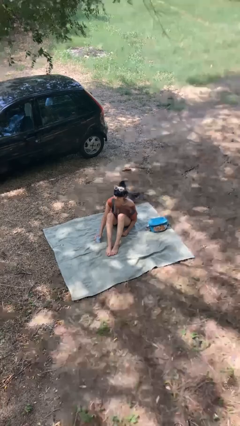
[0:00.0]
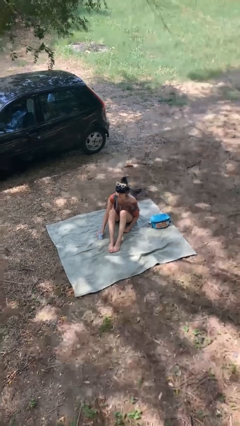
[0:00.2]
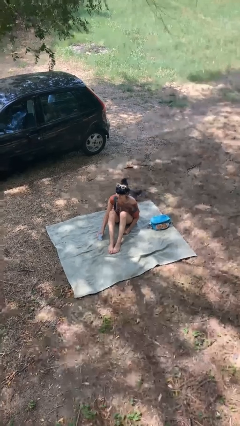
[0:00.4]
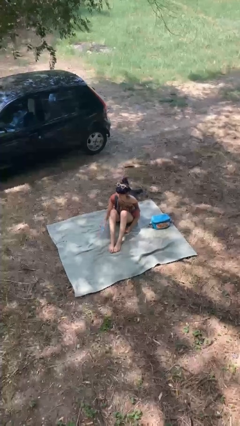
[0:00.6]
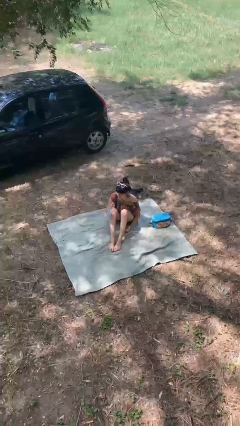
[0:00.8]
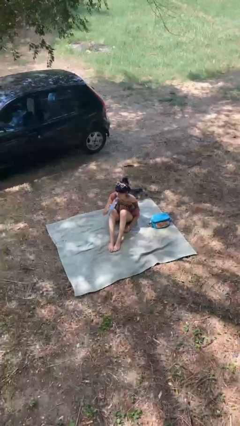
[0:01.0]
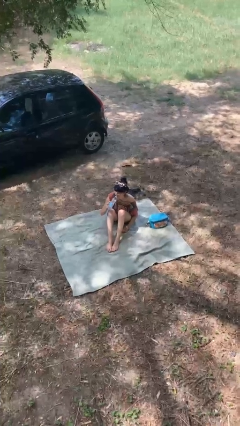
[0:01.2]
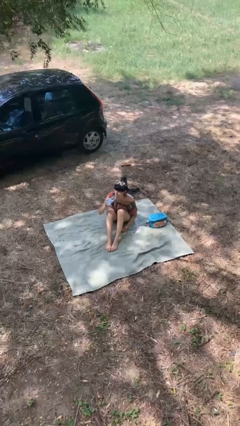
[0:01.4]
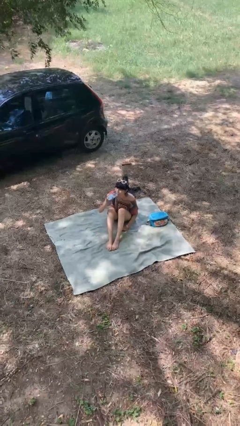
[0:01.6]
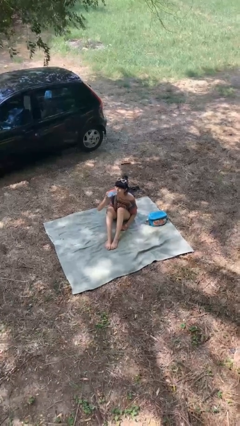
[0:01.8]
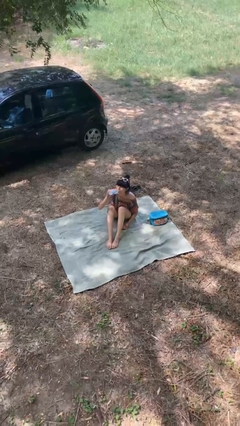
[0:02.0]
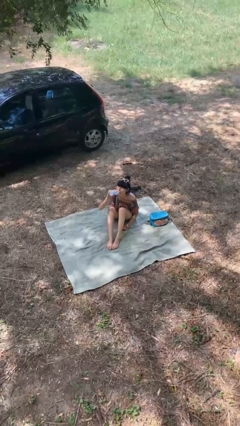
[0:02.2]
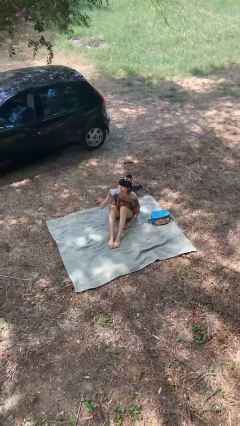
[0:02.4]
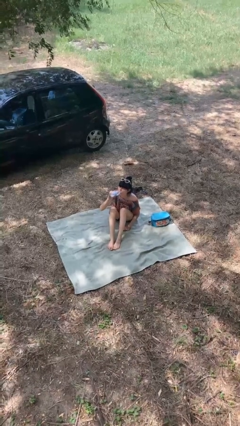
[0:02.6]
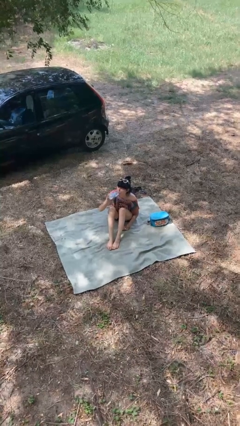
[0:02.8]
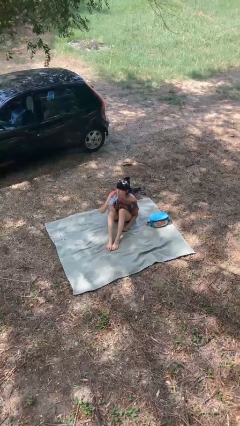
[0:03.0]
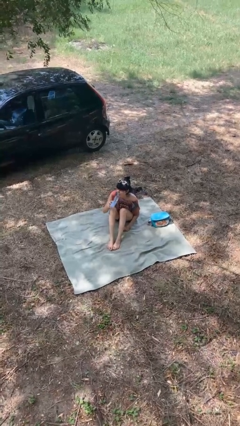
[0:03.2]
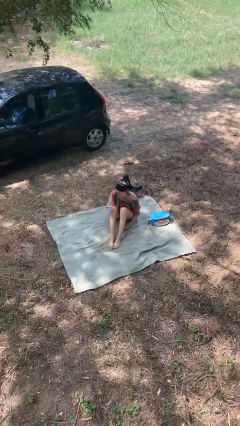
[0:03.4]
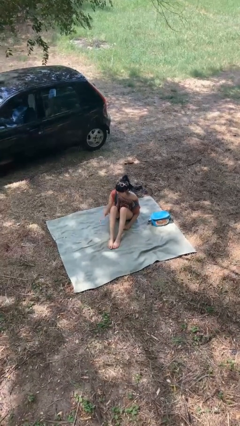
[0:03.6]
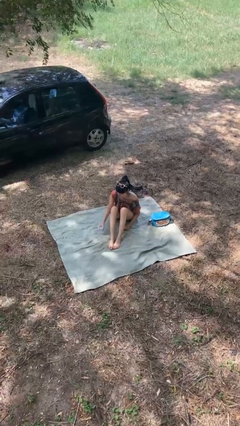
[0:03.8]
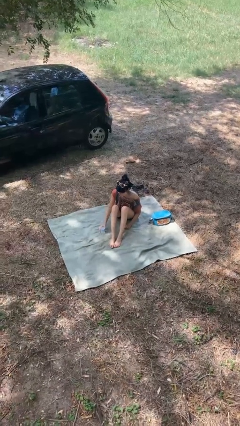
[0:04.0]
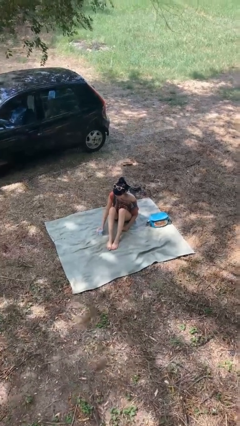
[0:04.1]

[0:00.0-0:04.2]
person drinks from bottle

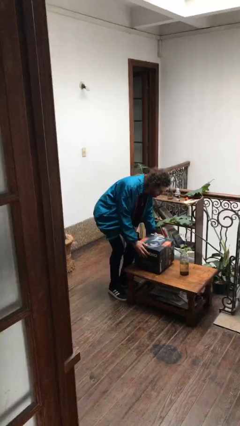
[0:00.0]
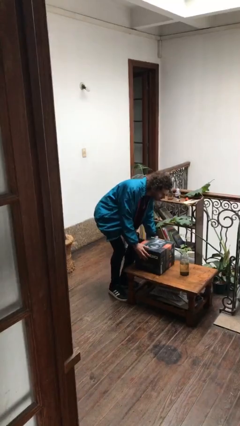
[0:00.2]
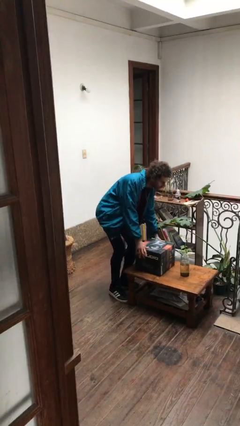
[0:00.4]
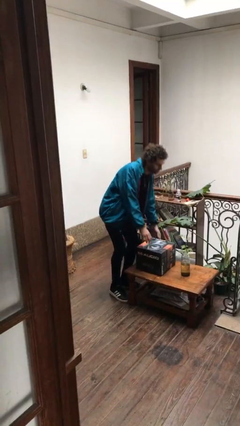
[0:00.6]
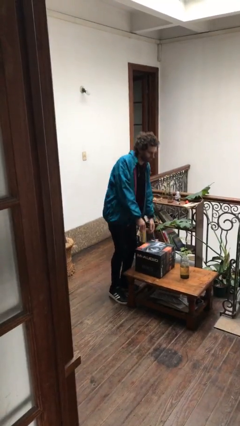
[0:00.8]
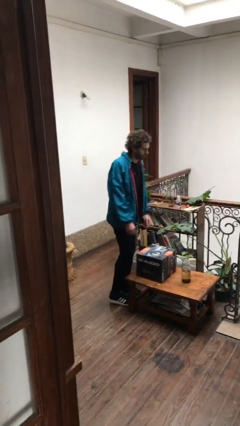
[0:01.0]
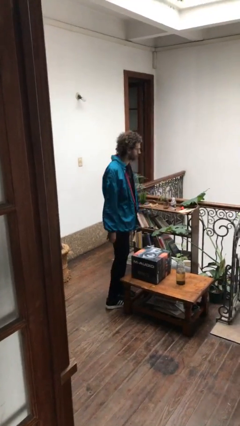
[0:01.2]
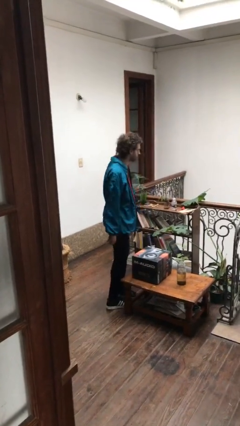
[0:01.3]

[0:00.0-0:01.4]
person puts down object on table

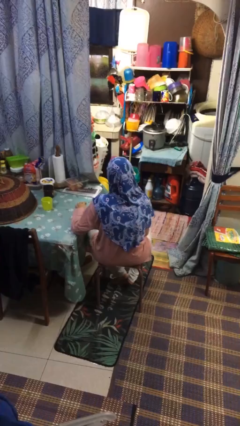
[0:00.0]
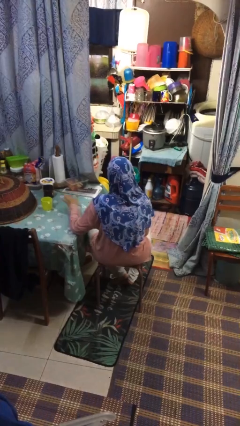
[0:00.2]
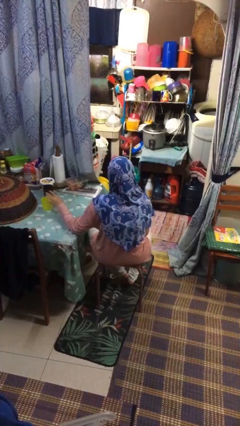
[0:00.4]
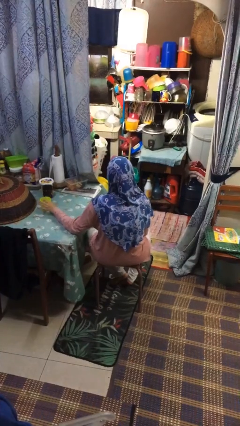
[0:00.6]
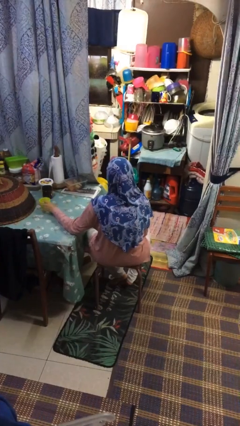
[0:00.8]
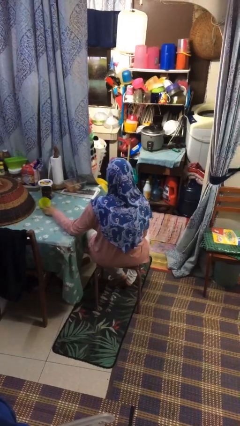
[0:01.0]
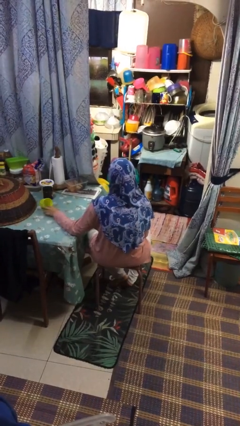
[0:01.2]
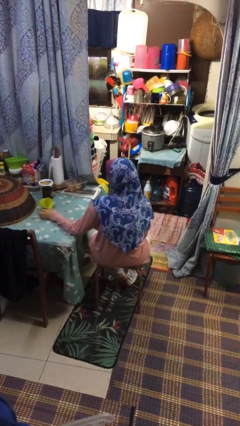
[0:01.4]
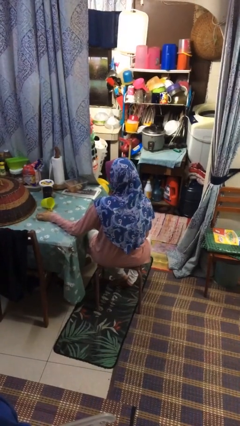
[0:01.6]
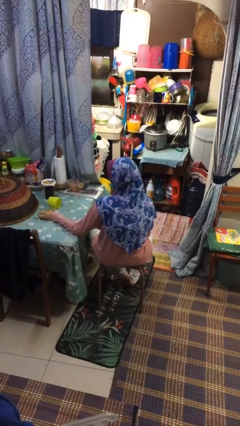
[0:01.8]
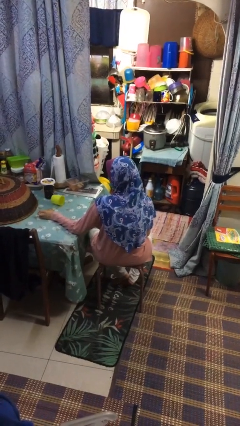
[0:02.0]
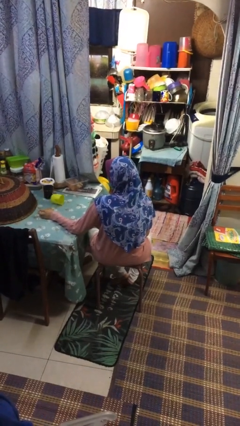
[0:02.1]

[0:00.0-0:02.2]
person knocks over glass

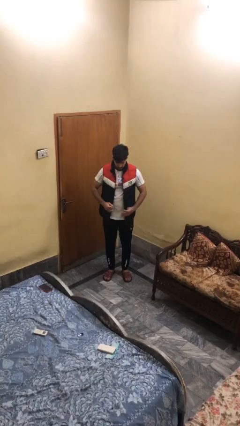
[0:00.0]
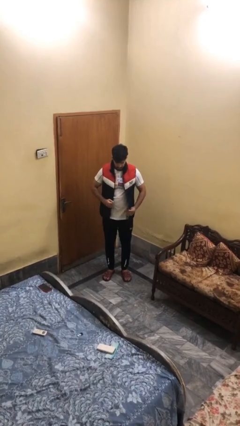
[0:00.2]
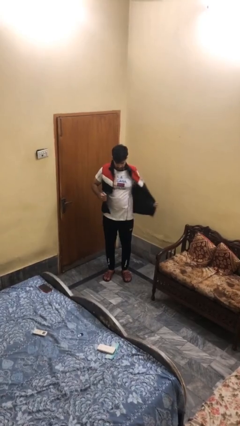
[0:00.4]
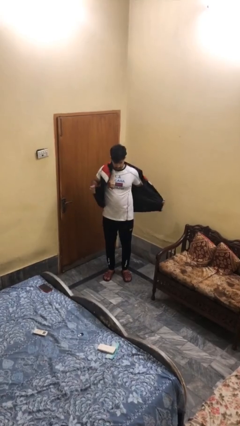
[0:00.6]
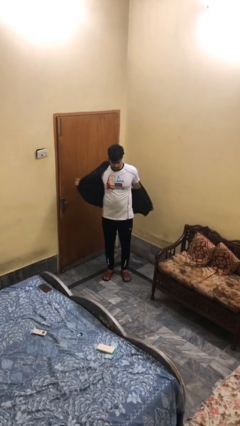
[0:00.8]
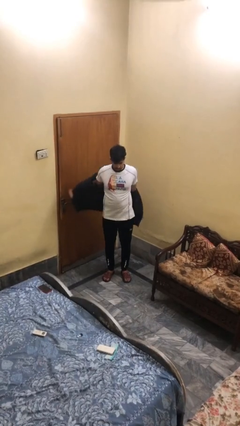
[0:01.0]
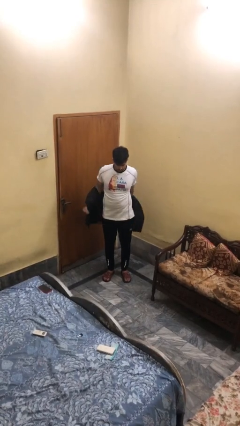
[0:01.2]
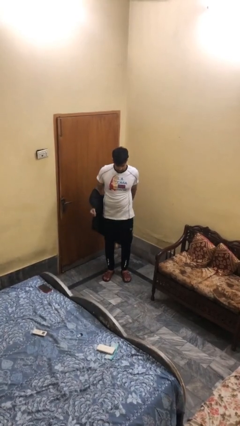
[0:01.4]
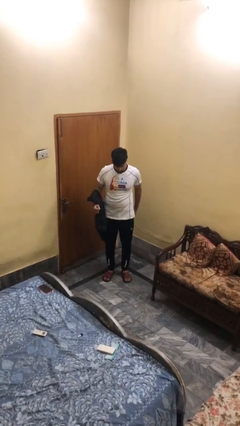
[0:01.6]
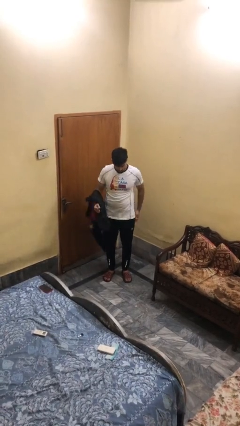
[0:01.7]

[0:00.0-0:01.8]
person takes off jacket

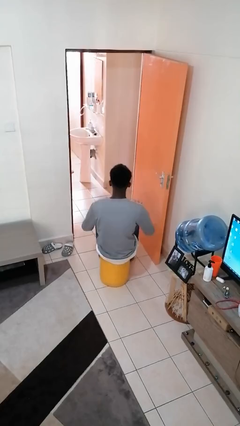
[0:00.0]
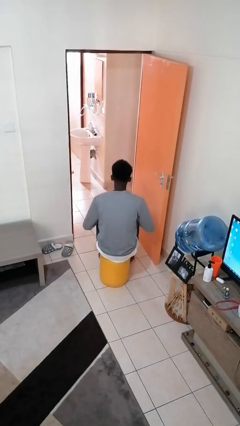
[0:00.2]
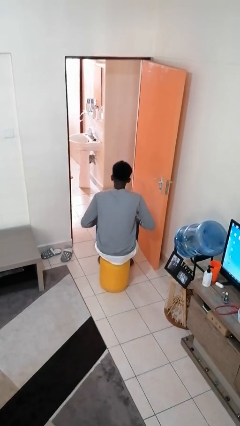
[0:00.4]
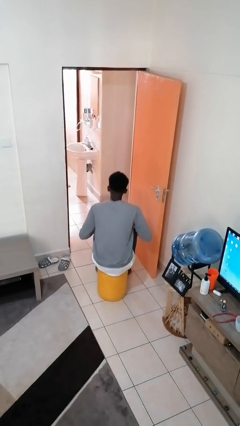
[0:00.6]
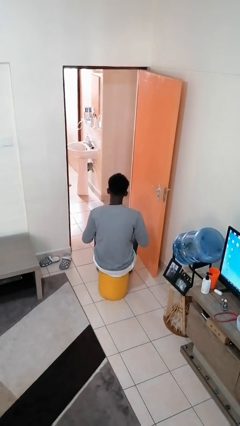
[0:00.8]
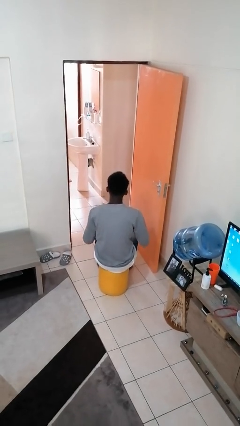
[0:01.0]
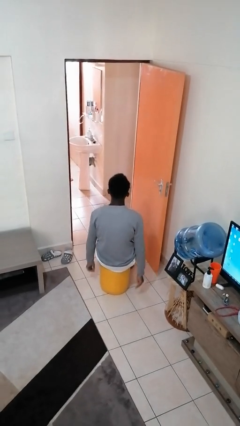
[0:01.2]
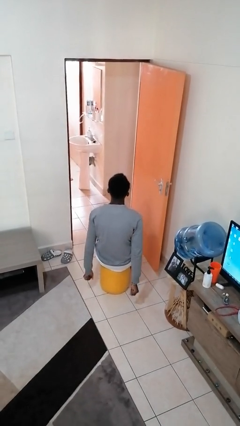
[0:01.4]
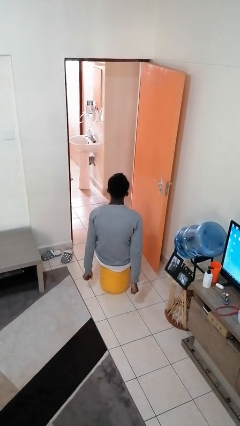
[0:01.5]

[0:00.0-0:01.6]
person slaps hands on thighs

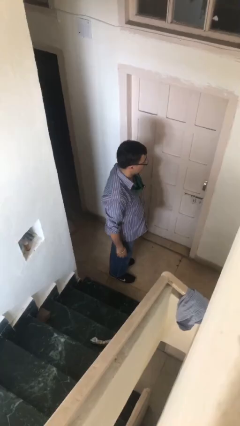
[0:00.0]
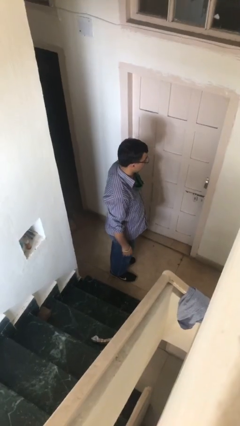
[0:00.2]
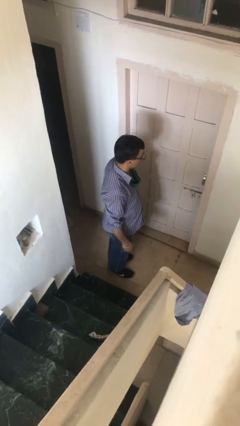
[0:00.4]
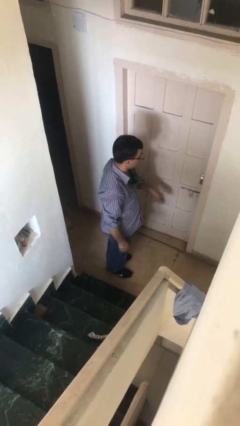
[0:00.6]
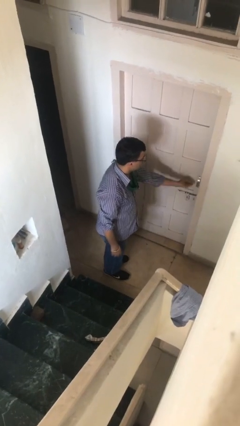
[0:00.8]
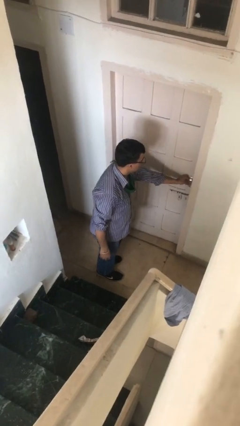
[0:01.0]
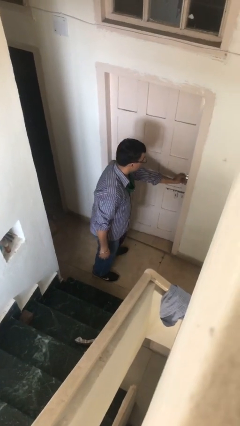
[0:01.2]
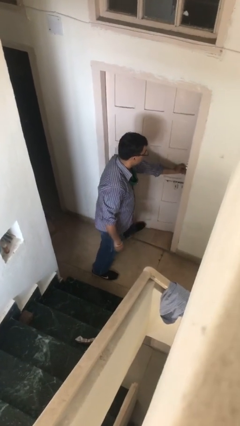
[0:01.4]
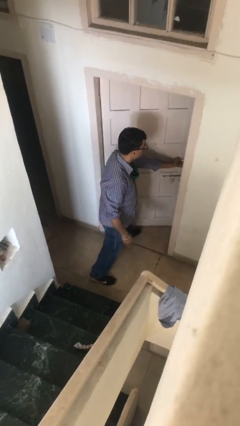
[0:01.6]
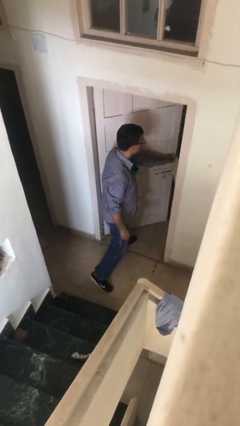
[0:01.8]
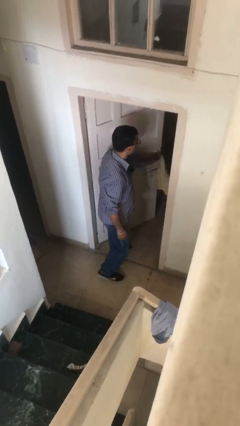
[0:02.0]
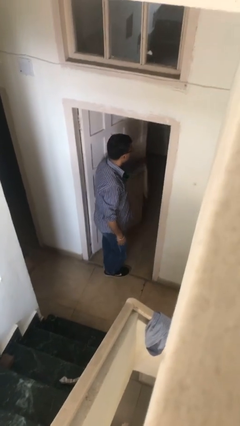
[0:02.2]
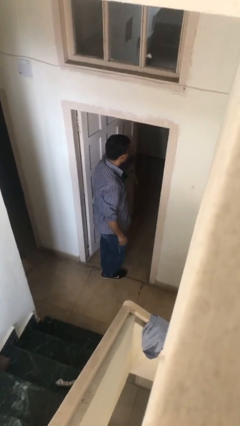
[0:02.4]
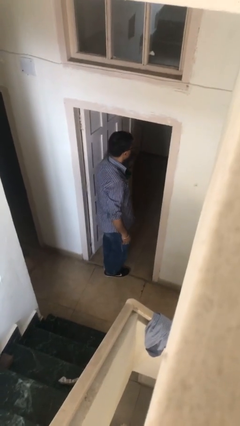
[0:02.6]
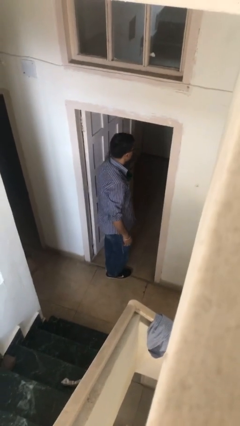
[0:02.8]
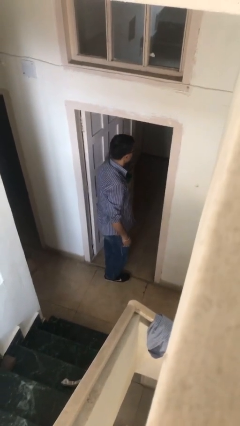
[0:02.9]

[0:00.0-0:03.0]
person opens facility door

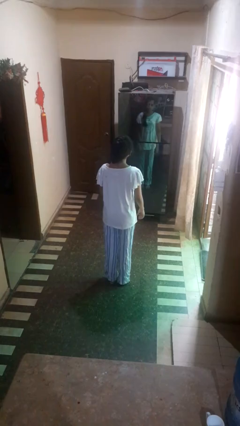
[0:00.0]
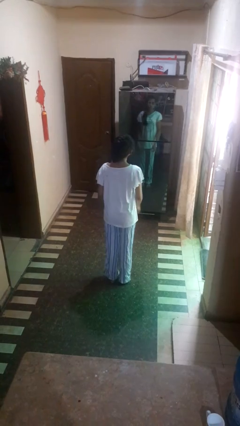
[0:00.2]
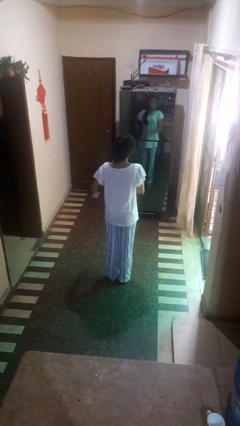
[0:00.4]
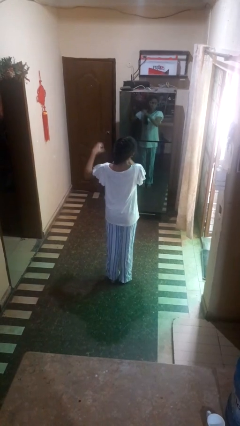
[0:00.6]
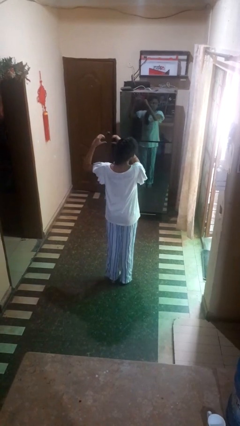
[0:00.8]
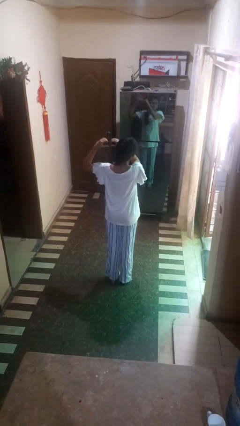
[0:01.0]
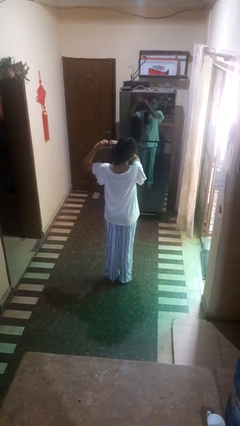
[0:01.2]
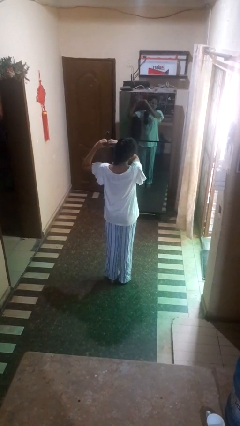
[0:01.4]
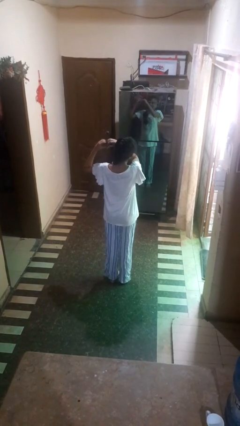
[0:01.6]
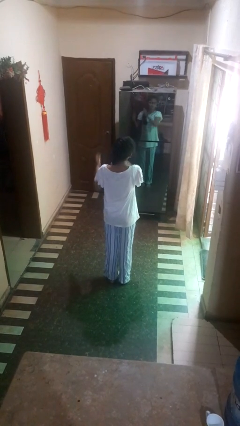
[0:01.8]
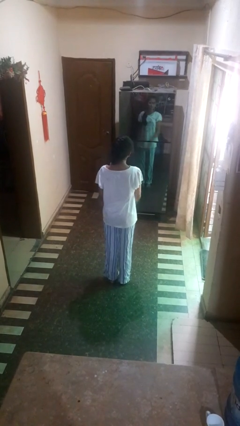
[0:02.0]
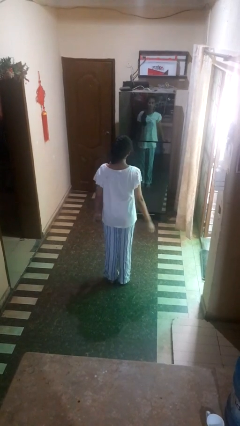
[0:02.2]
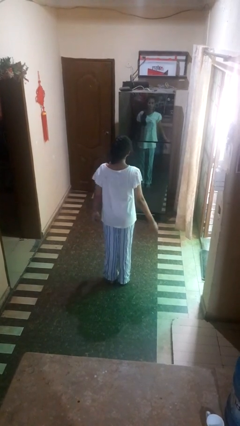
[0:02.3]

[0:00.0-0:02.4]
person gestures heart

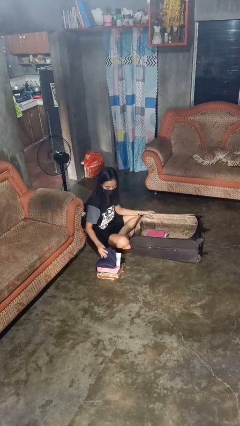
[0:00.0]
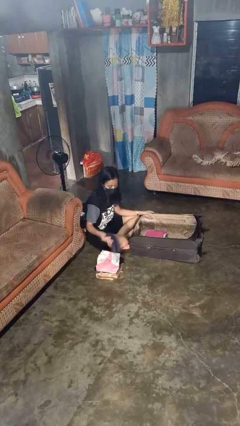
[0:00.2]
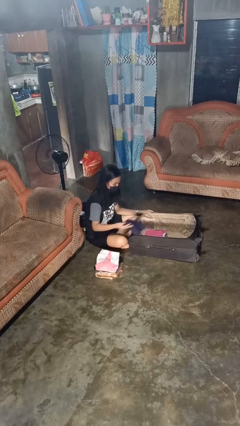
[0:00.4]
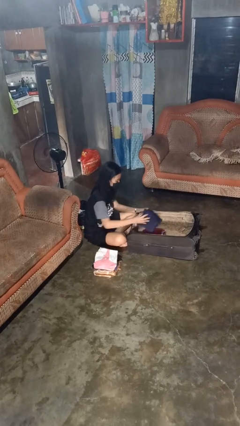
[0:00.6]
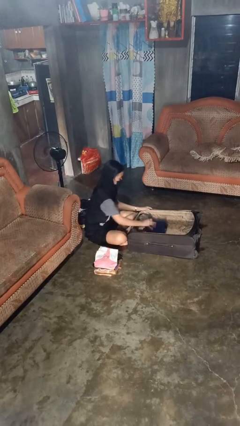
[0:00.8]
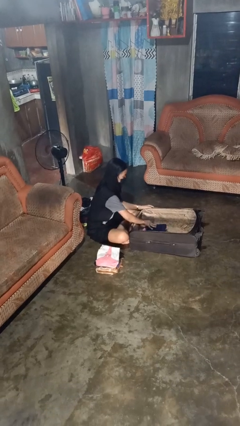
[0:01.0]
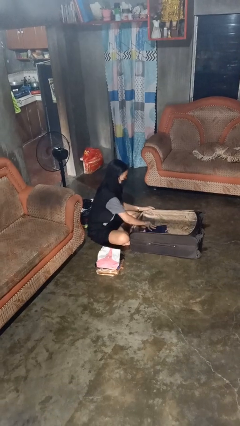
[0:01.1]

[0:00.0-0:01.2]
person loads clothes into suitcase
